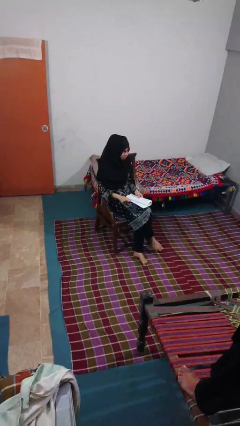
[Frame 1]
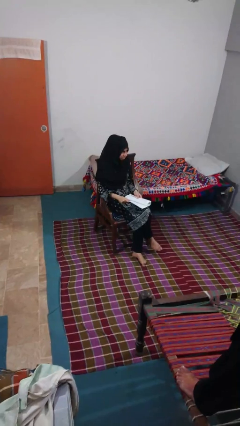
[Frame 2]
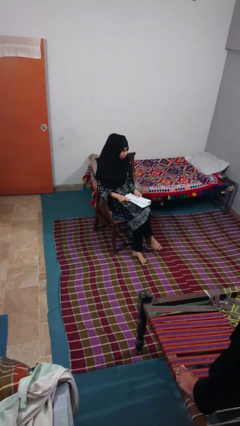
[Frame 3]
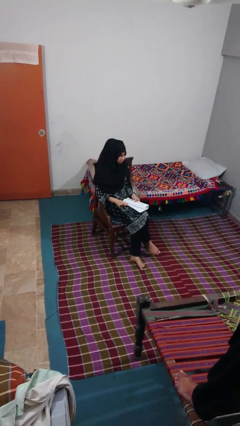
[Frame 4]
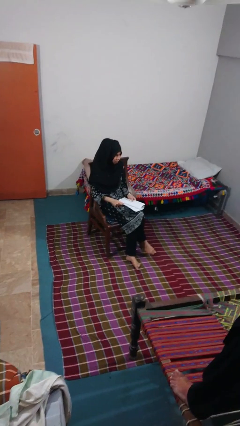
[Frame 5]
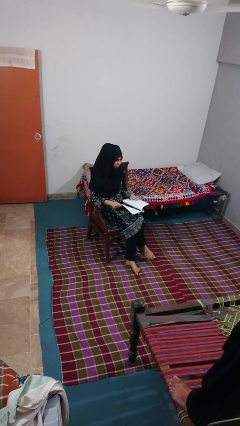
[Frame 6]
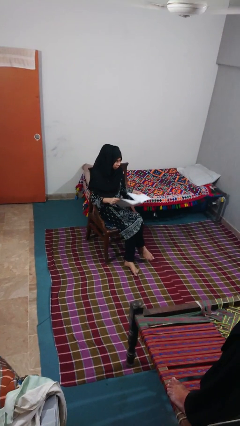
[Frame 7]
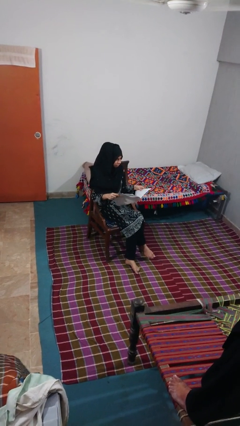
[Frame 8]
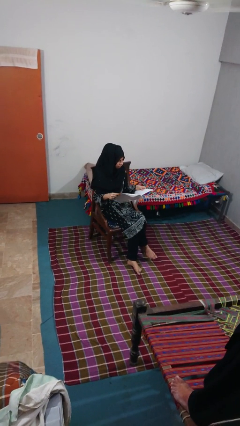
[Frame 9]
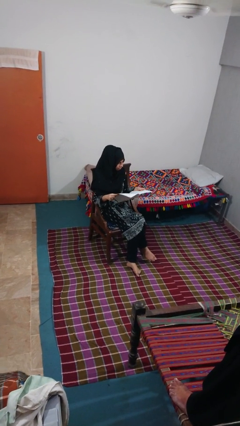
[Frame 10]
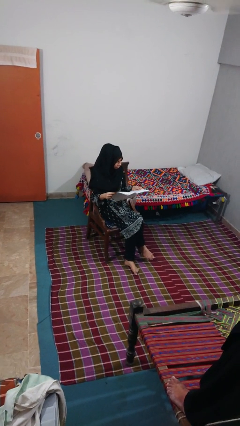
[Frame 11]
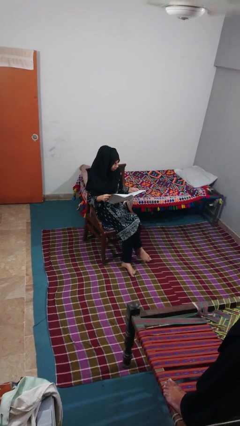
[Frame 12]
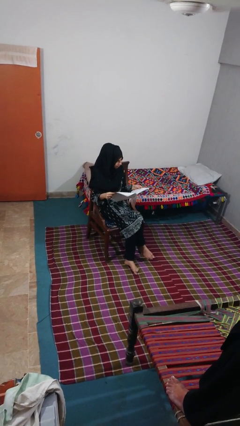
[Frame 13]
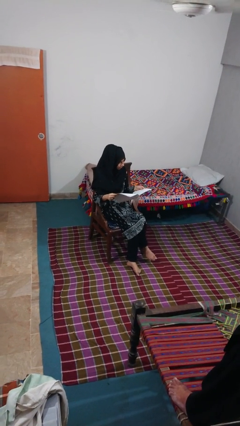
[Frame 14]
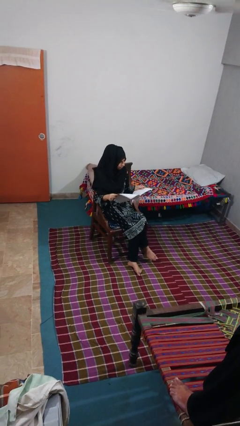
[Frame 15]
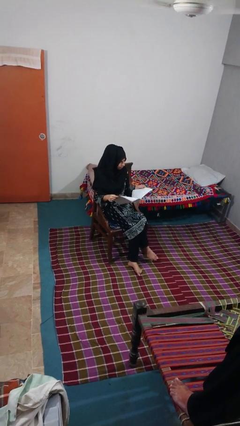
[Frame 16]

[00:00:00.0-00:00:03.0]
person reads newspaper

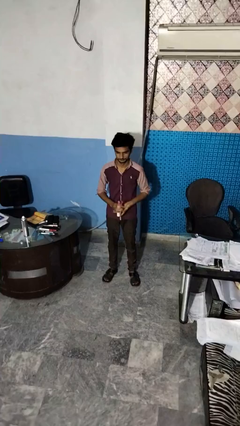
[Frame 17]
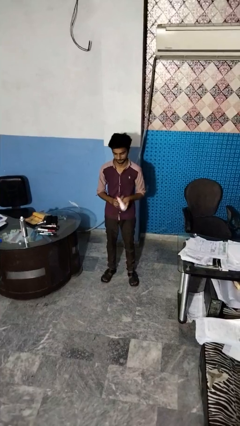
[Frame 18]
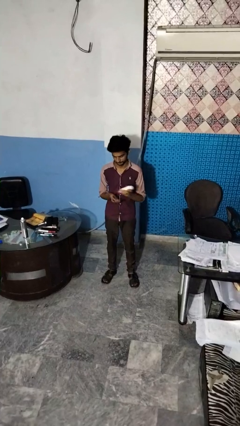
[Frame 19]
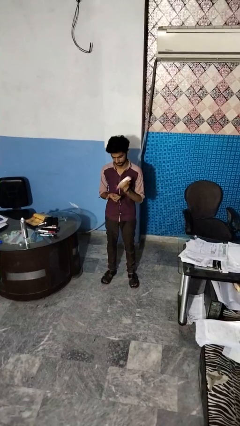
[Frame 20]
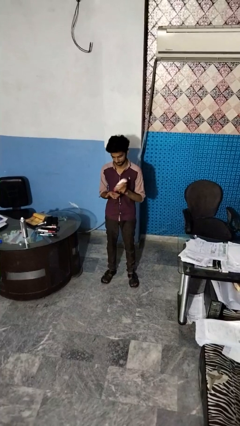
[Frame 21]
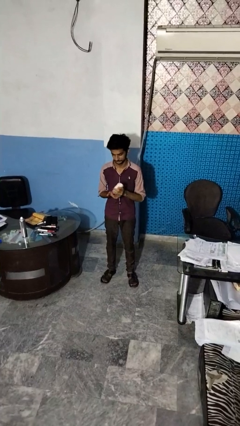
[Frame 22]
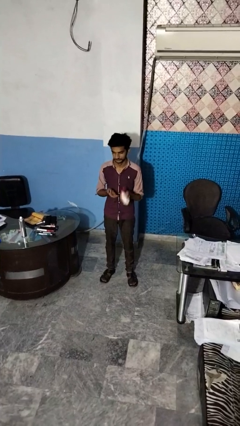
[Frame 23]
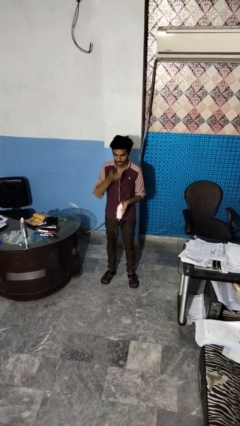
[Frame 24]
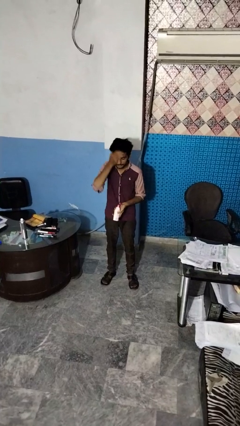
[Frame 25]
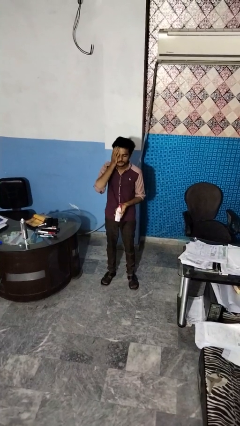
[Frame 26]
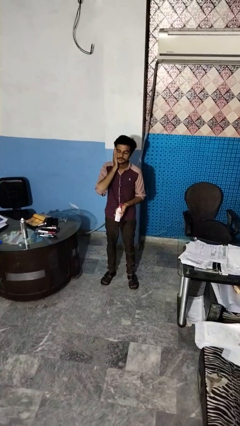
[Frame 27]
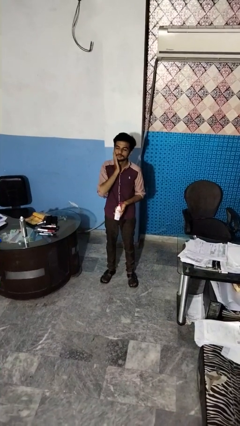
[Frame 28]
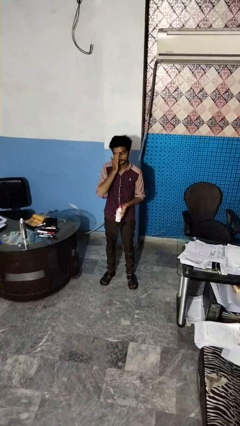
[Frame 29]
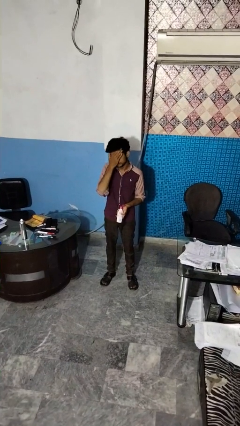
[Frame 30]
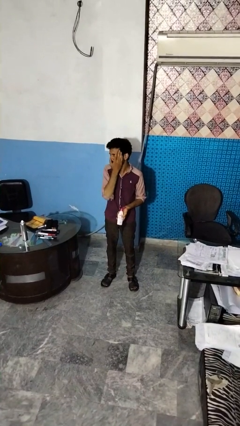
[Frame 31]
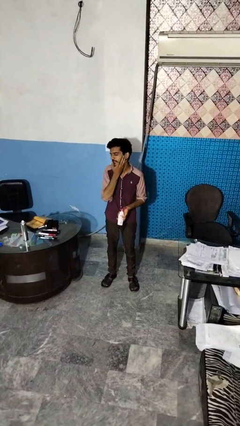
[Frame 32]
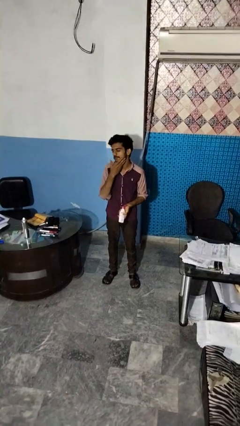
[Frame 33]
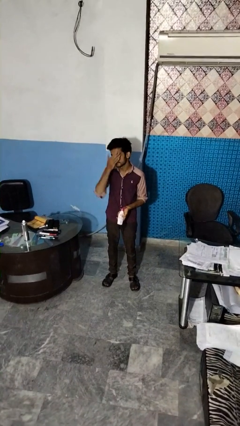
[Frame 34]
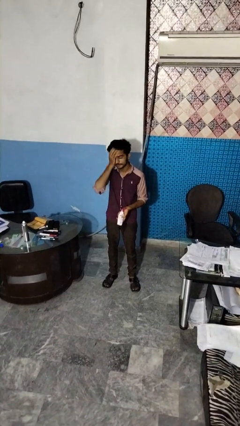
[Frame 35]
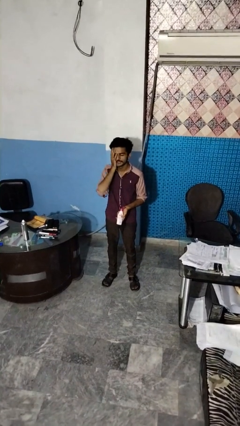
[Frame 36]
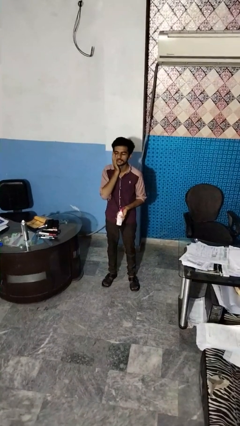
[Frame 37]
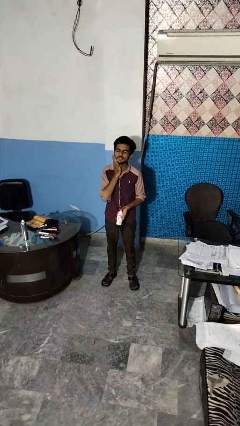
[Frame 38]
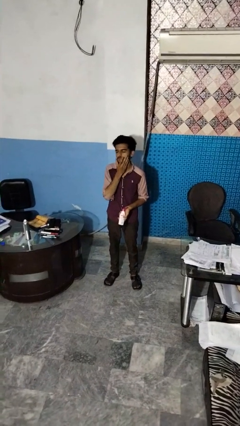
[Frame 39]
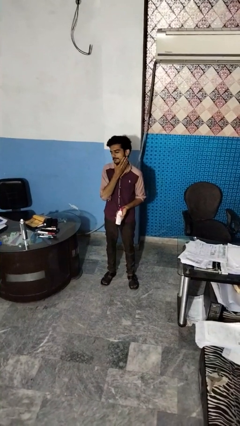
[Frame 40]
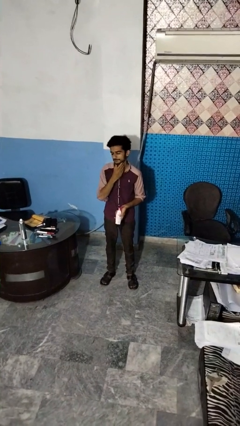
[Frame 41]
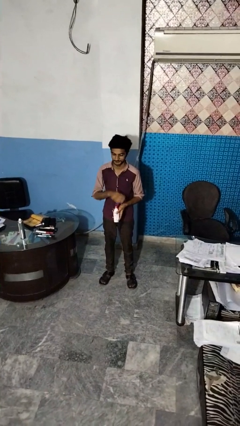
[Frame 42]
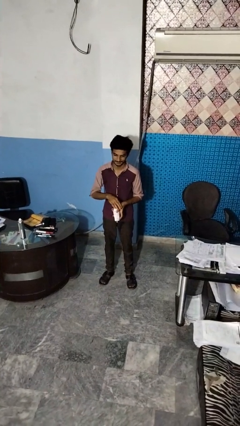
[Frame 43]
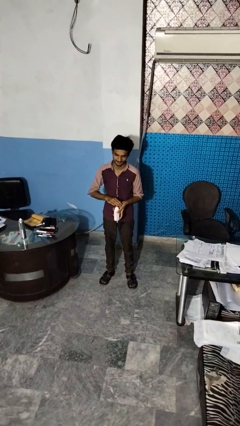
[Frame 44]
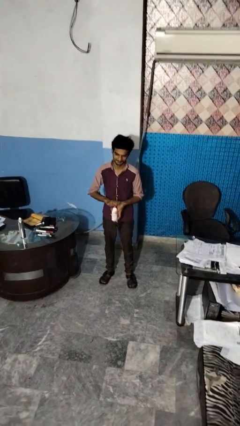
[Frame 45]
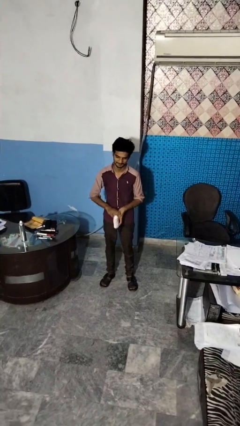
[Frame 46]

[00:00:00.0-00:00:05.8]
person applies facial moisturizer

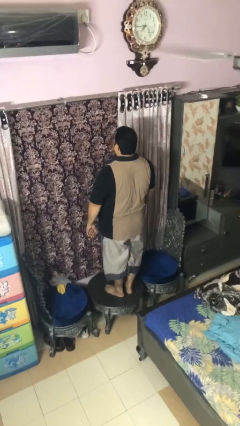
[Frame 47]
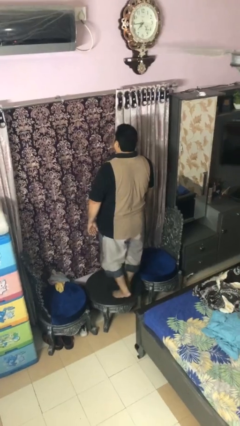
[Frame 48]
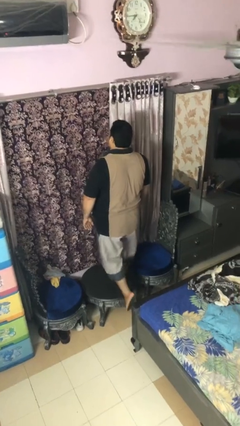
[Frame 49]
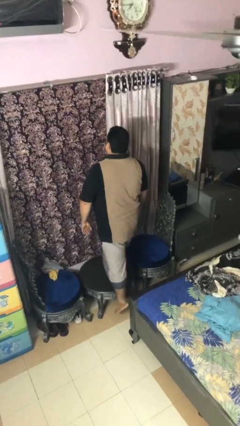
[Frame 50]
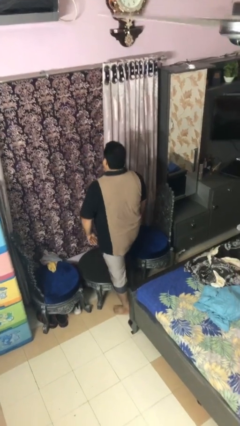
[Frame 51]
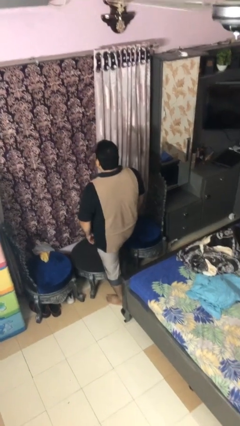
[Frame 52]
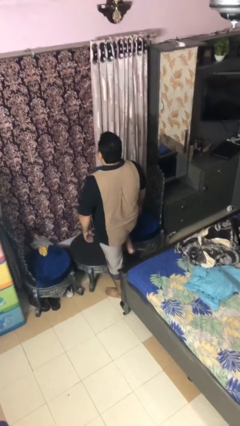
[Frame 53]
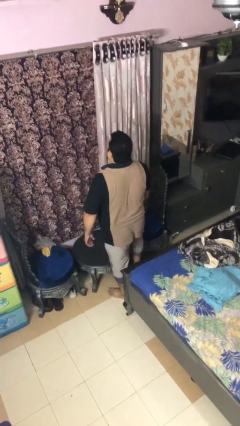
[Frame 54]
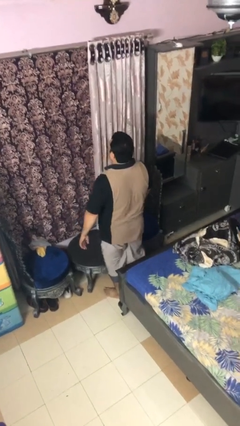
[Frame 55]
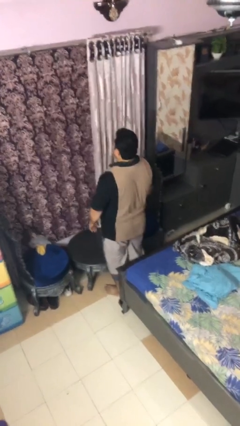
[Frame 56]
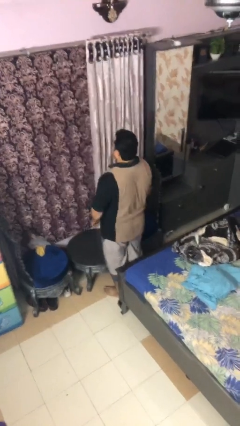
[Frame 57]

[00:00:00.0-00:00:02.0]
person climbs off table

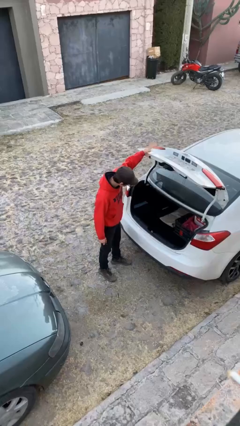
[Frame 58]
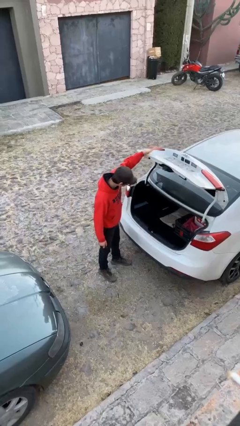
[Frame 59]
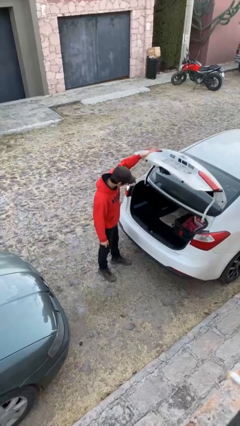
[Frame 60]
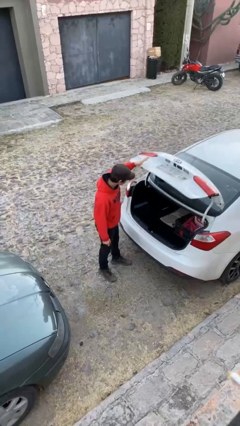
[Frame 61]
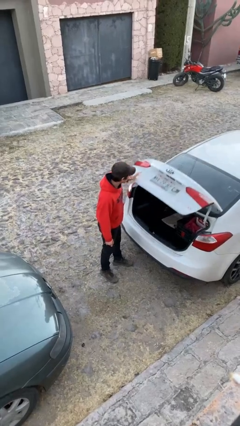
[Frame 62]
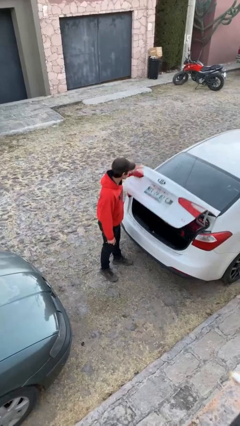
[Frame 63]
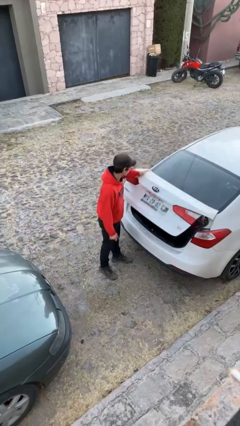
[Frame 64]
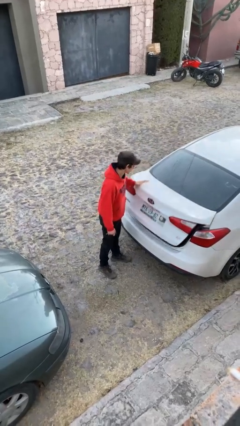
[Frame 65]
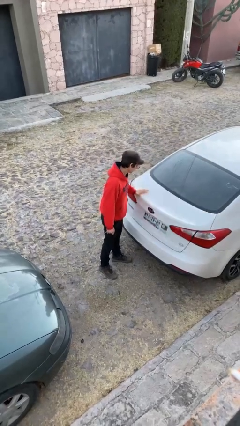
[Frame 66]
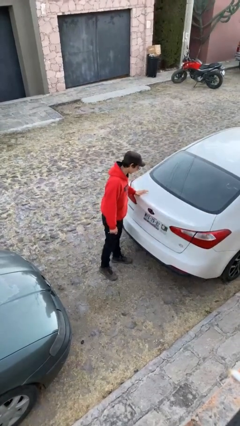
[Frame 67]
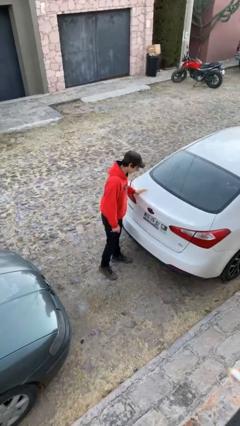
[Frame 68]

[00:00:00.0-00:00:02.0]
person closes car trunk

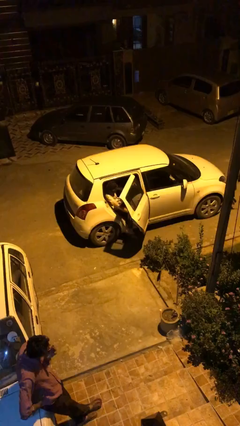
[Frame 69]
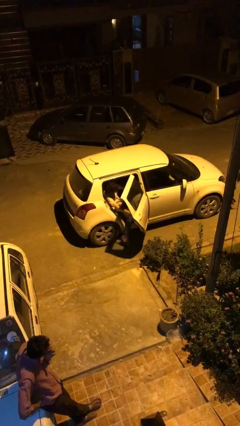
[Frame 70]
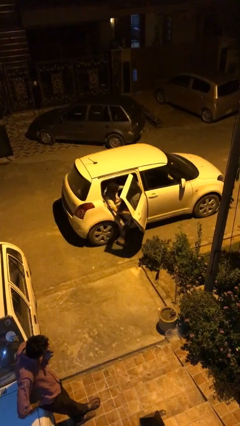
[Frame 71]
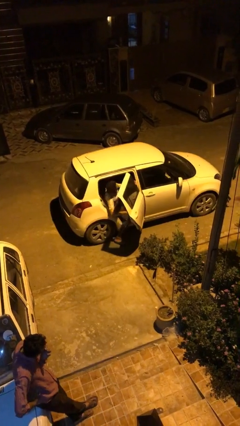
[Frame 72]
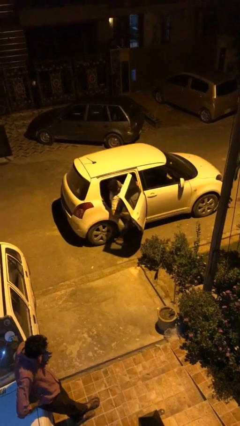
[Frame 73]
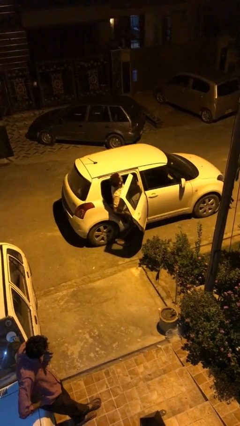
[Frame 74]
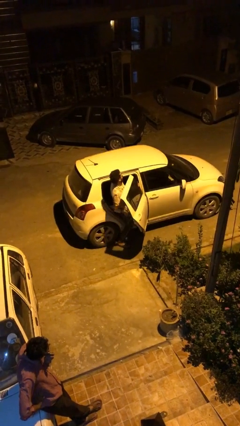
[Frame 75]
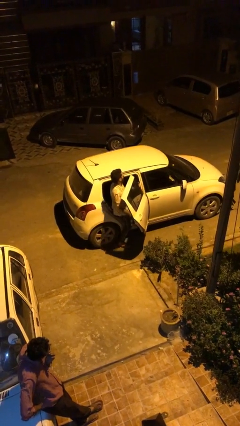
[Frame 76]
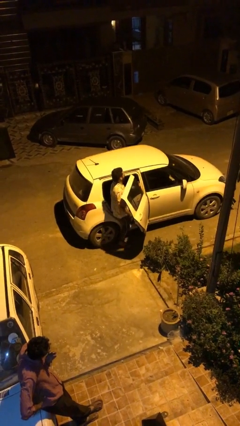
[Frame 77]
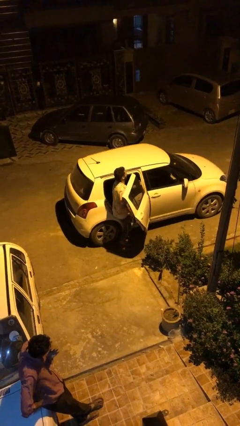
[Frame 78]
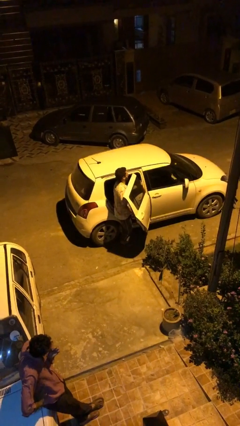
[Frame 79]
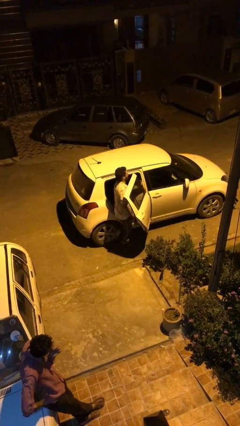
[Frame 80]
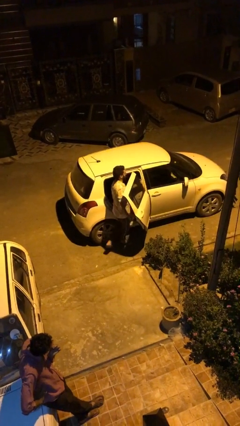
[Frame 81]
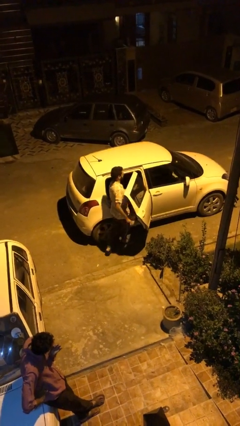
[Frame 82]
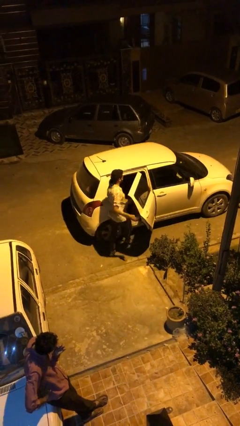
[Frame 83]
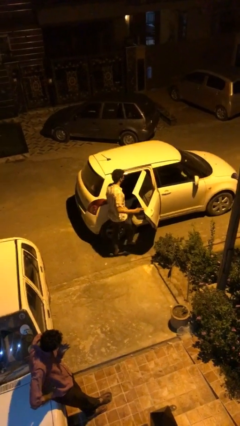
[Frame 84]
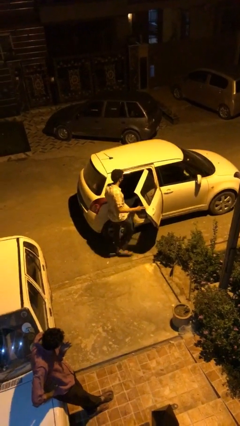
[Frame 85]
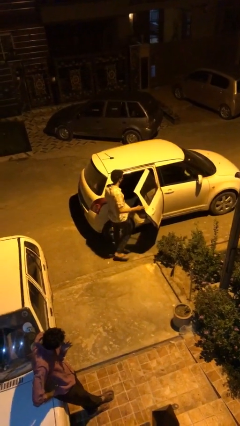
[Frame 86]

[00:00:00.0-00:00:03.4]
person exits car

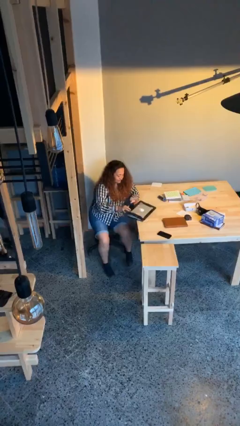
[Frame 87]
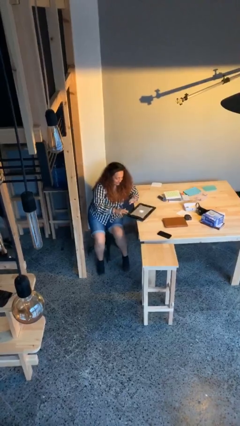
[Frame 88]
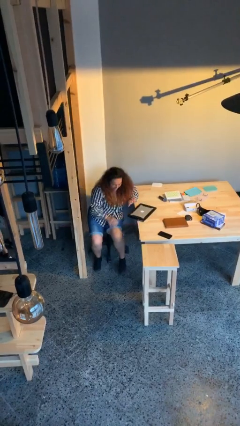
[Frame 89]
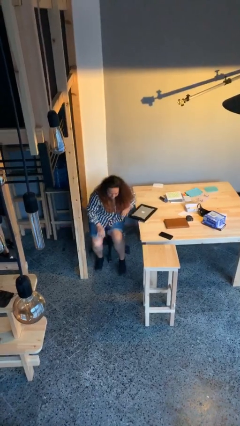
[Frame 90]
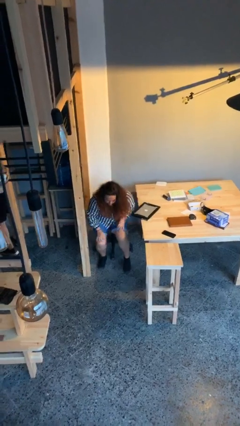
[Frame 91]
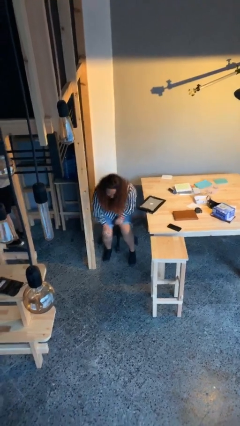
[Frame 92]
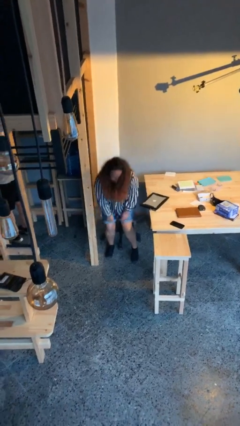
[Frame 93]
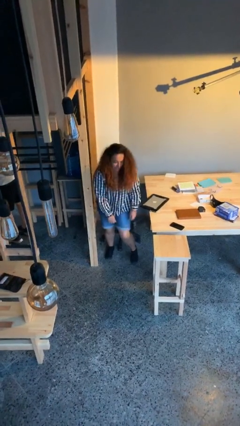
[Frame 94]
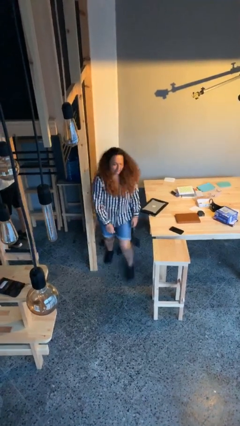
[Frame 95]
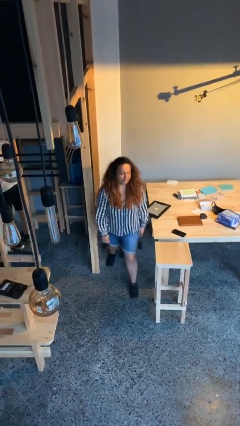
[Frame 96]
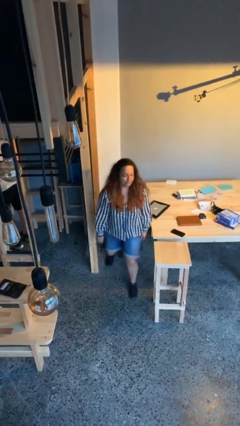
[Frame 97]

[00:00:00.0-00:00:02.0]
person stands up
